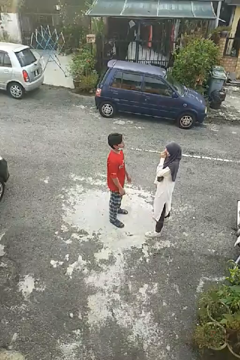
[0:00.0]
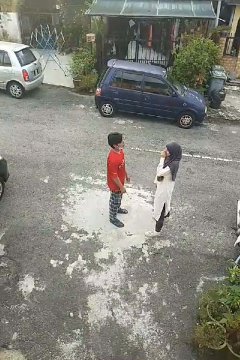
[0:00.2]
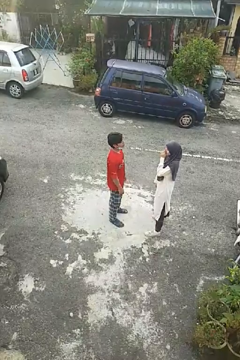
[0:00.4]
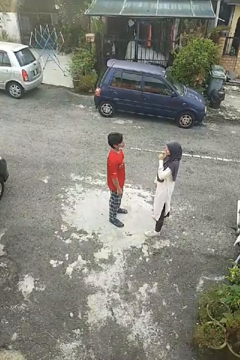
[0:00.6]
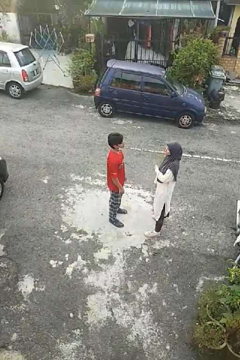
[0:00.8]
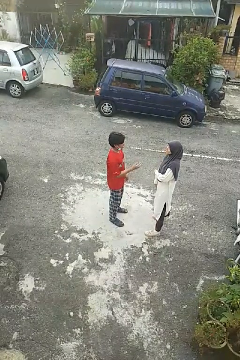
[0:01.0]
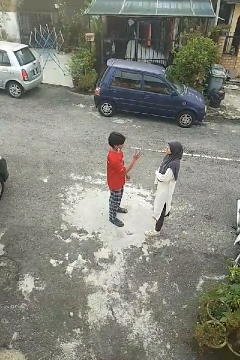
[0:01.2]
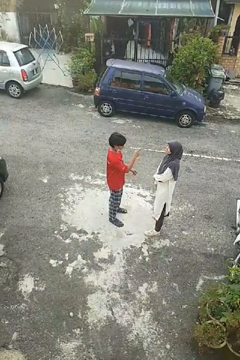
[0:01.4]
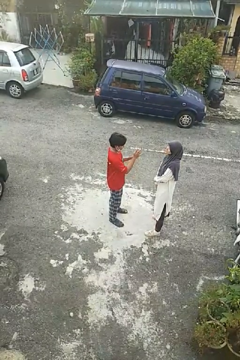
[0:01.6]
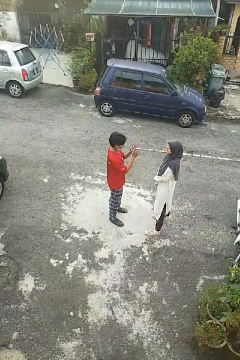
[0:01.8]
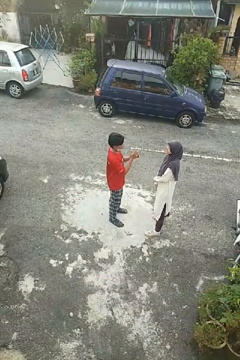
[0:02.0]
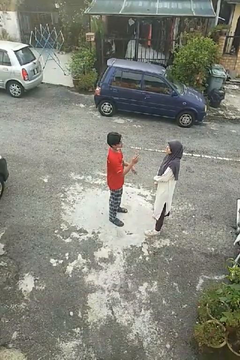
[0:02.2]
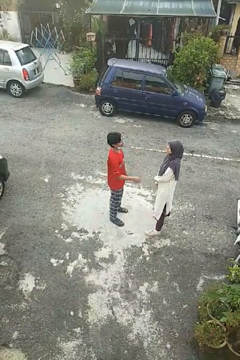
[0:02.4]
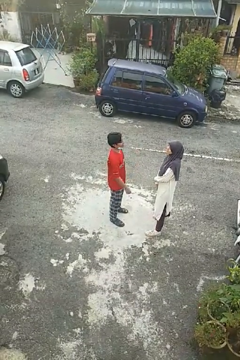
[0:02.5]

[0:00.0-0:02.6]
person talks to person

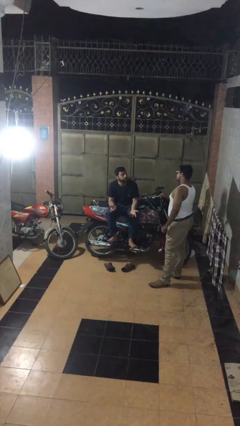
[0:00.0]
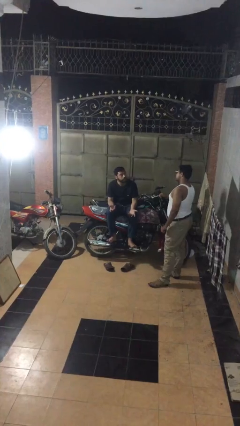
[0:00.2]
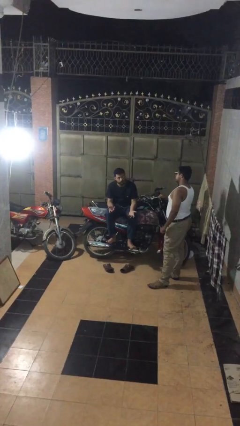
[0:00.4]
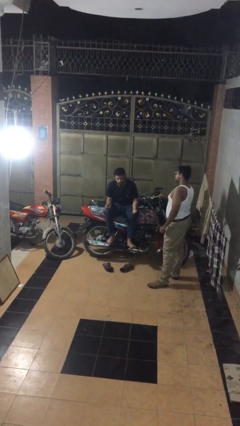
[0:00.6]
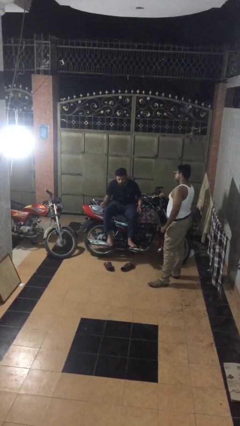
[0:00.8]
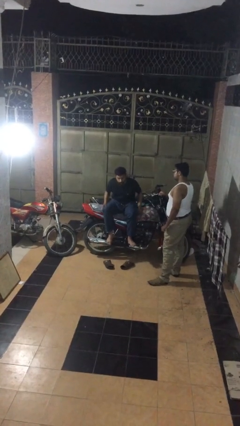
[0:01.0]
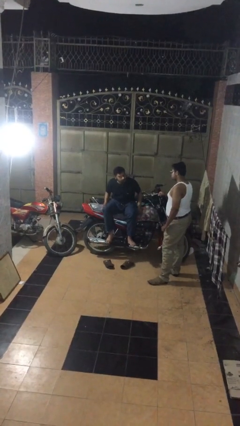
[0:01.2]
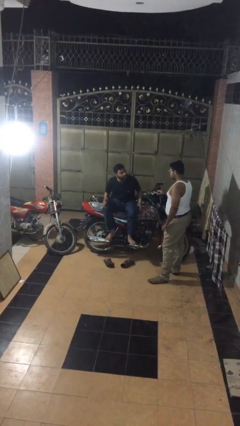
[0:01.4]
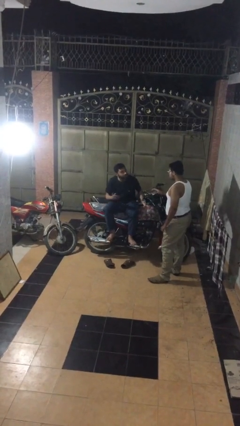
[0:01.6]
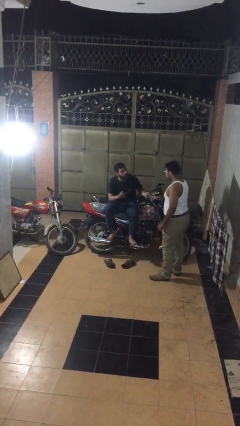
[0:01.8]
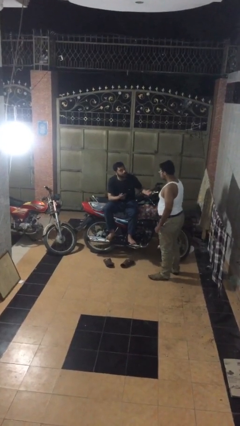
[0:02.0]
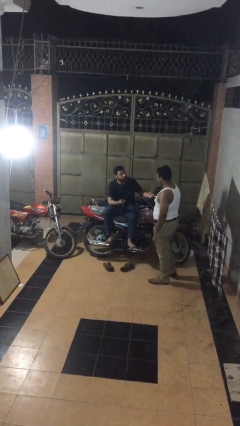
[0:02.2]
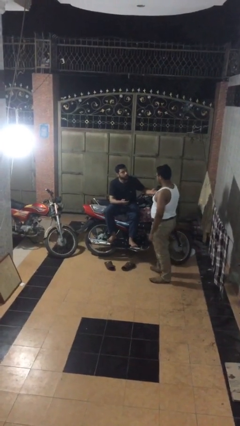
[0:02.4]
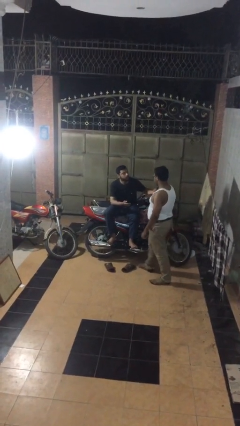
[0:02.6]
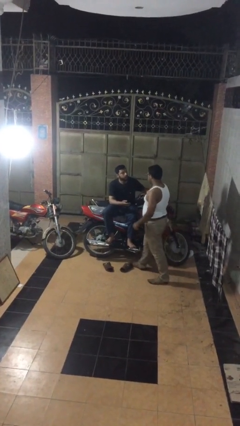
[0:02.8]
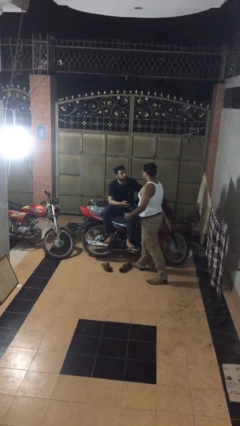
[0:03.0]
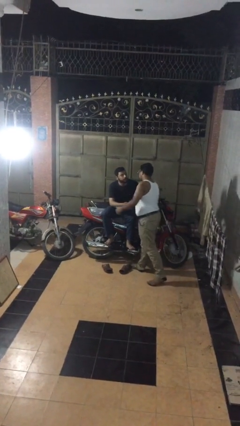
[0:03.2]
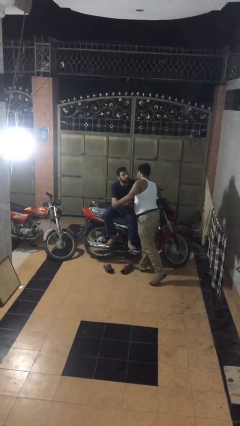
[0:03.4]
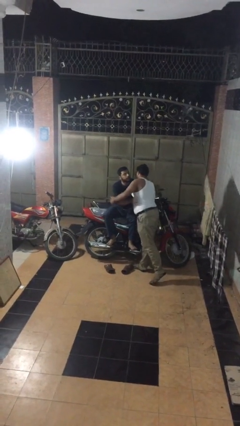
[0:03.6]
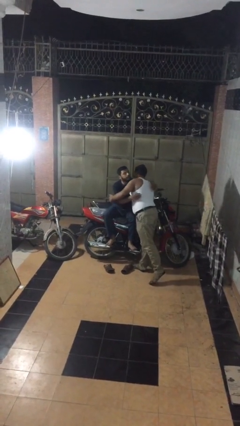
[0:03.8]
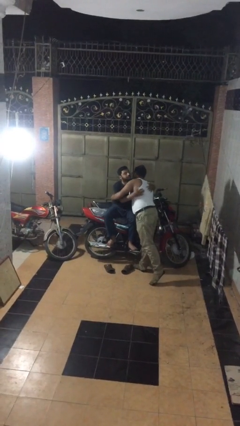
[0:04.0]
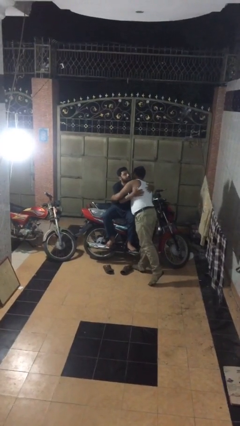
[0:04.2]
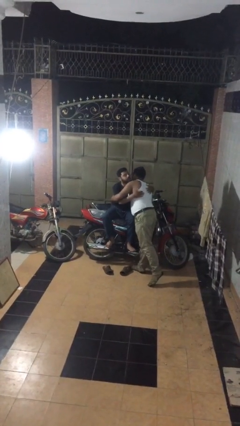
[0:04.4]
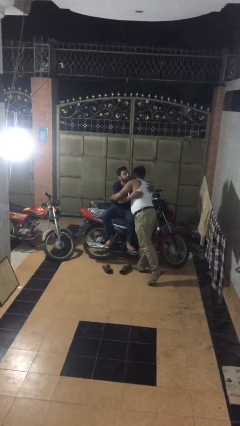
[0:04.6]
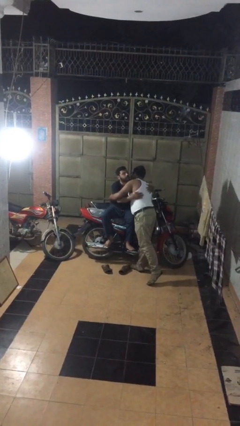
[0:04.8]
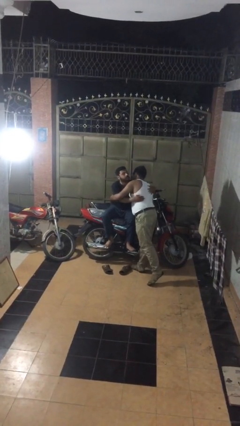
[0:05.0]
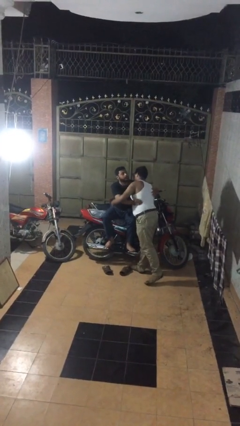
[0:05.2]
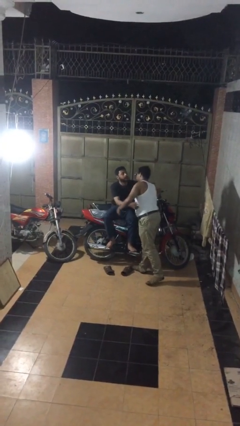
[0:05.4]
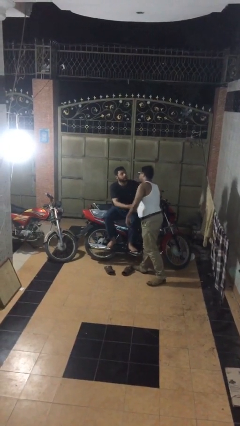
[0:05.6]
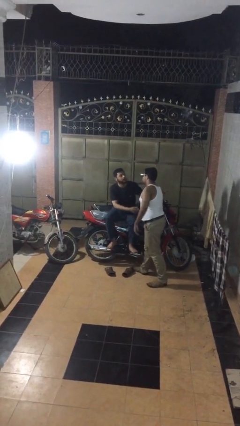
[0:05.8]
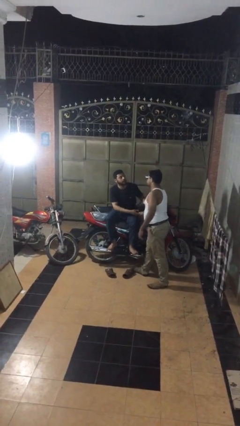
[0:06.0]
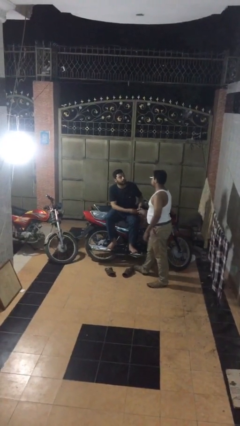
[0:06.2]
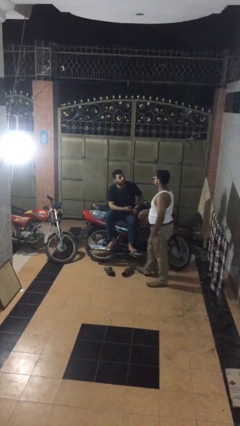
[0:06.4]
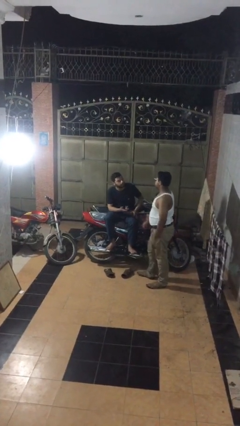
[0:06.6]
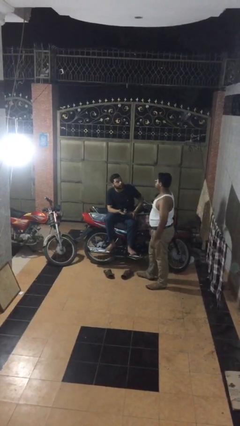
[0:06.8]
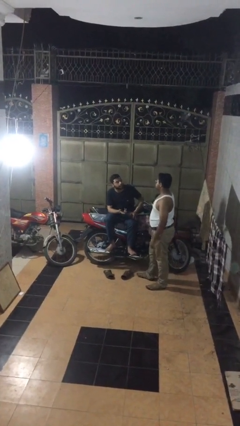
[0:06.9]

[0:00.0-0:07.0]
person embraces person

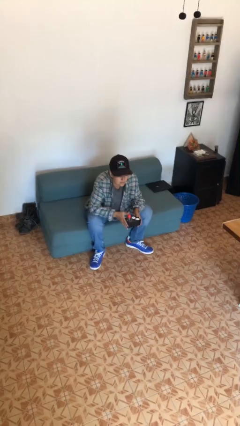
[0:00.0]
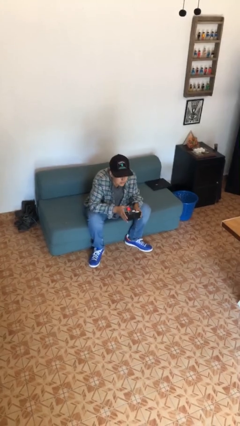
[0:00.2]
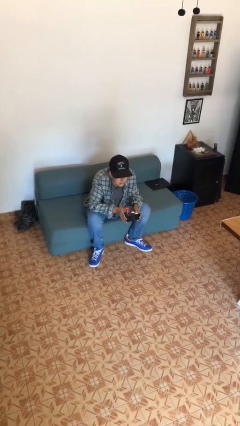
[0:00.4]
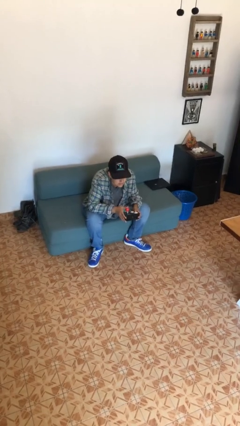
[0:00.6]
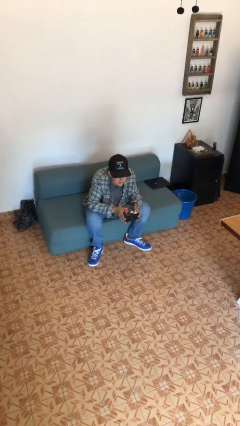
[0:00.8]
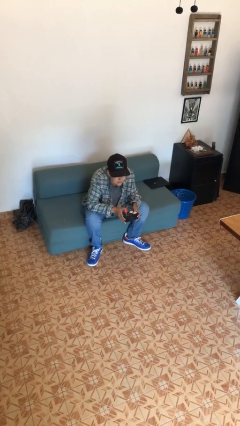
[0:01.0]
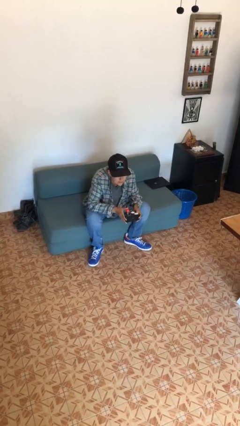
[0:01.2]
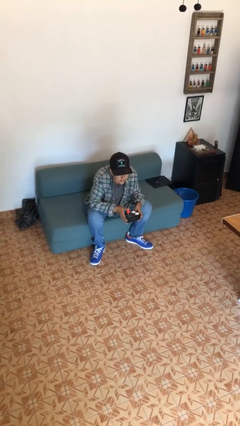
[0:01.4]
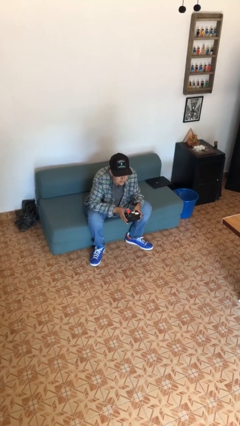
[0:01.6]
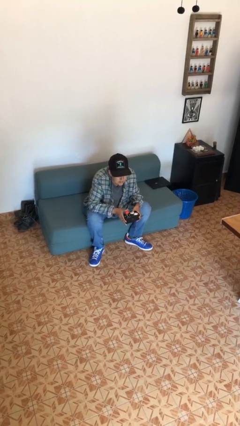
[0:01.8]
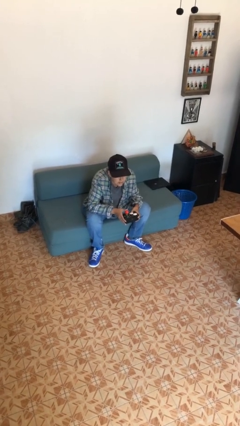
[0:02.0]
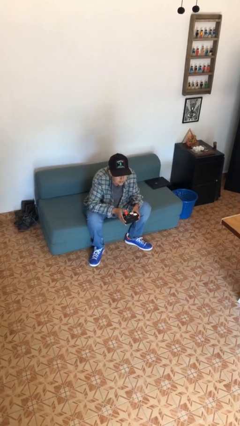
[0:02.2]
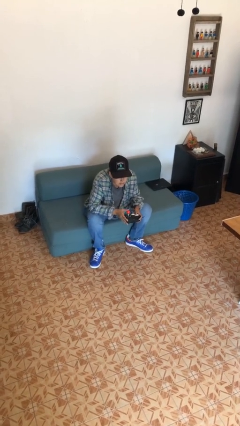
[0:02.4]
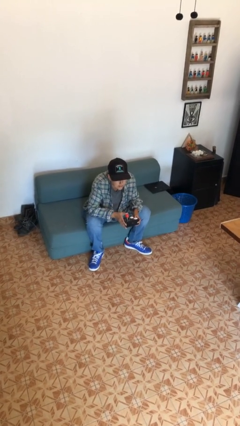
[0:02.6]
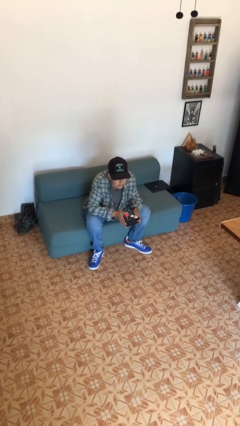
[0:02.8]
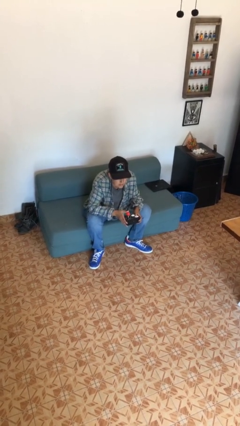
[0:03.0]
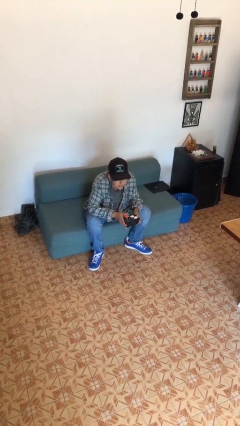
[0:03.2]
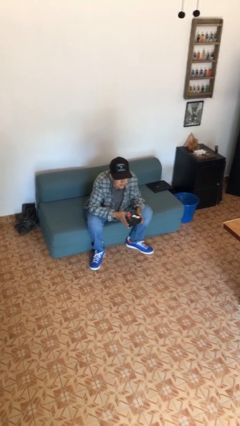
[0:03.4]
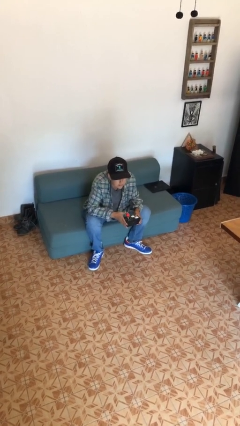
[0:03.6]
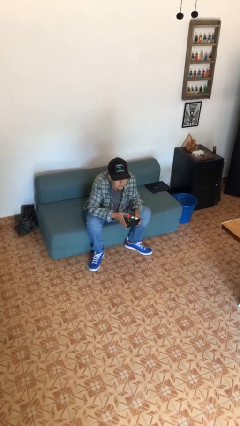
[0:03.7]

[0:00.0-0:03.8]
person interacts with handheld game

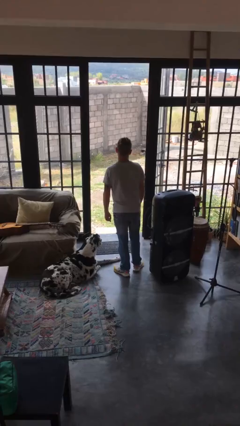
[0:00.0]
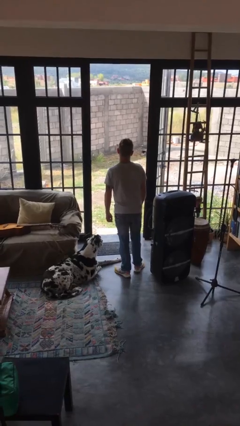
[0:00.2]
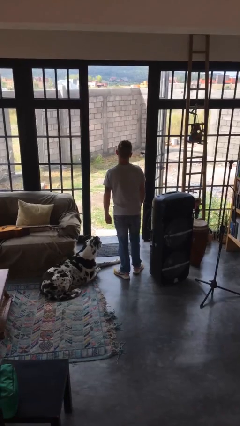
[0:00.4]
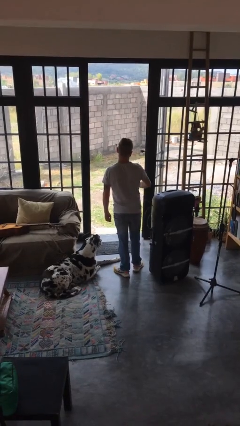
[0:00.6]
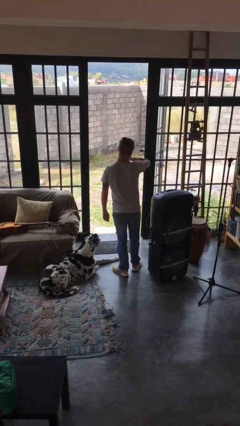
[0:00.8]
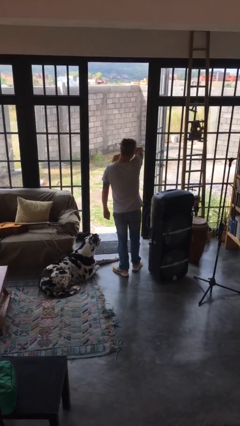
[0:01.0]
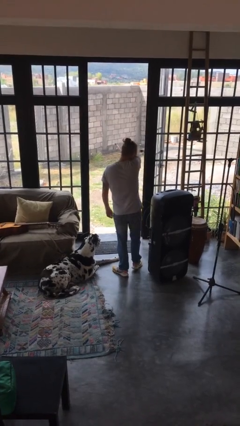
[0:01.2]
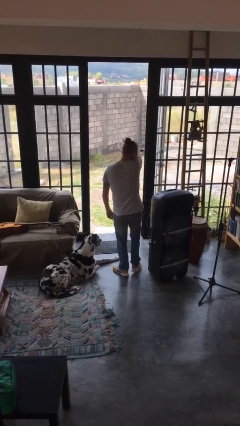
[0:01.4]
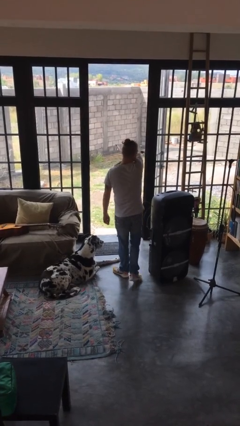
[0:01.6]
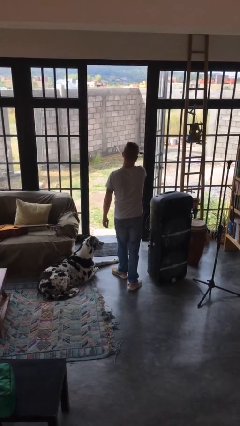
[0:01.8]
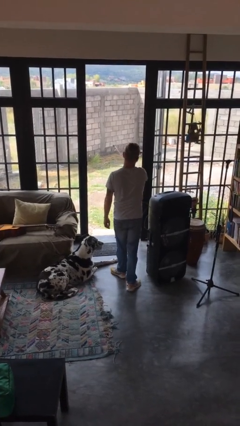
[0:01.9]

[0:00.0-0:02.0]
person sneezes into arm

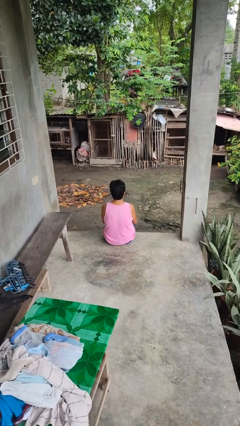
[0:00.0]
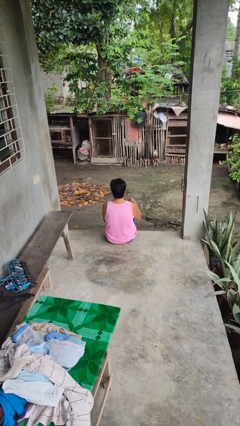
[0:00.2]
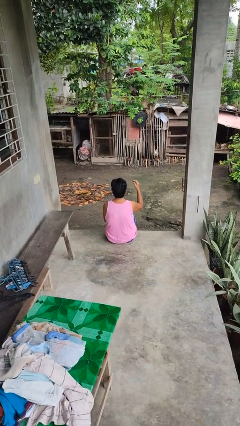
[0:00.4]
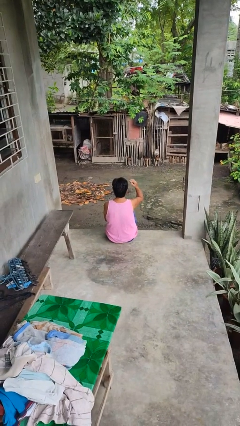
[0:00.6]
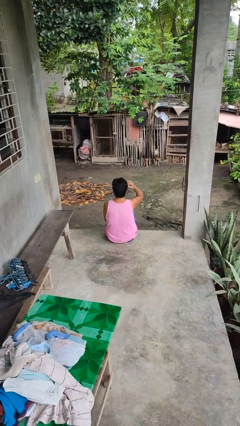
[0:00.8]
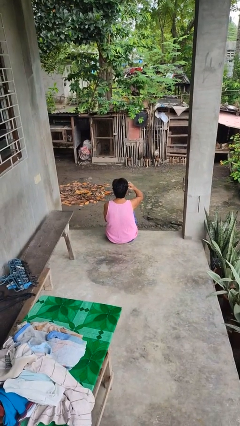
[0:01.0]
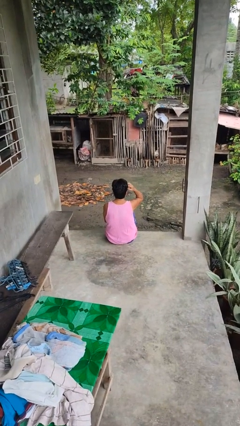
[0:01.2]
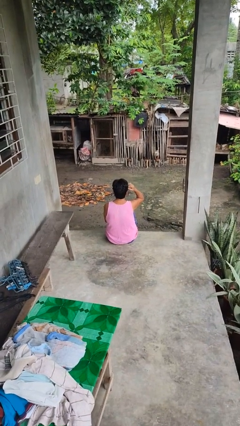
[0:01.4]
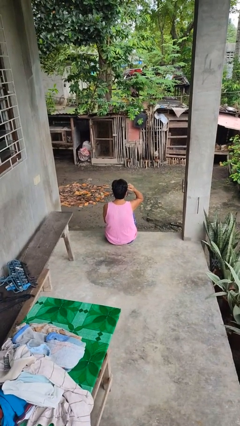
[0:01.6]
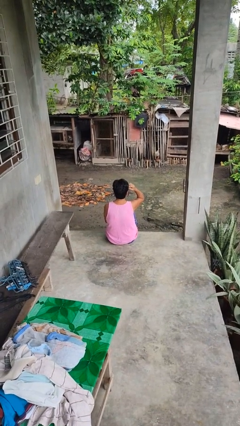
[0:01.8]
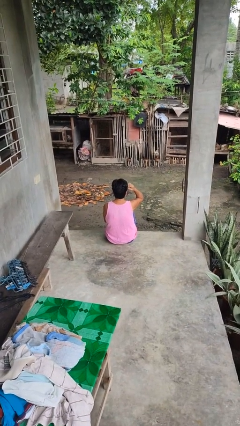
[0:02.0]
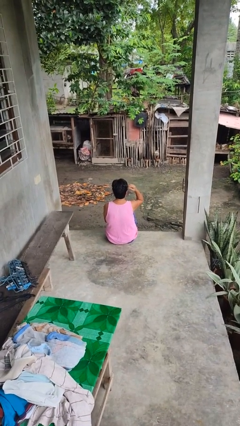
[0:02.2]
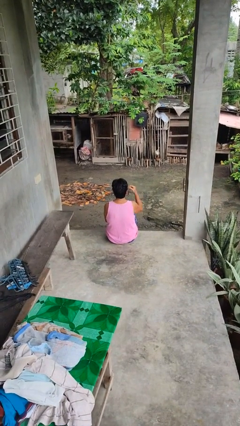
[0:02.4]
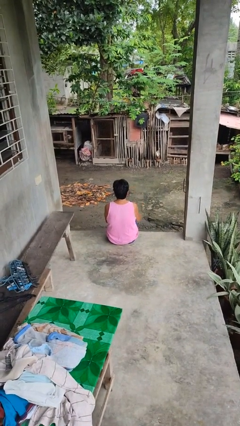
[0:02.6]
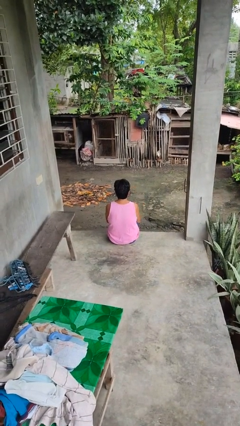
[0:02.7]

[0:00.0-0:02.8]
person scratches face
